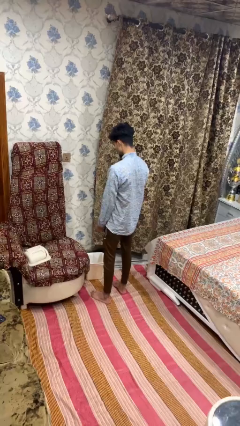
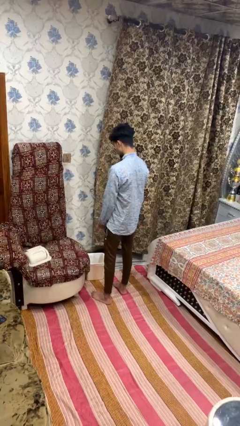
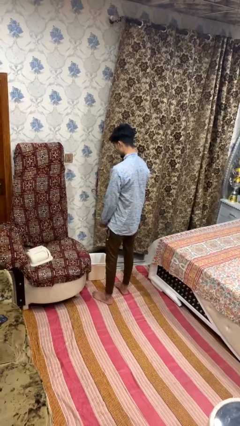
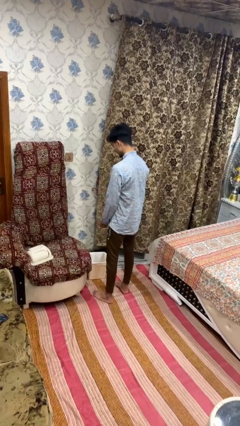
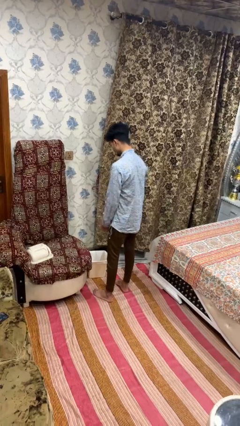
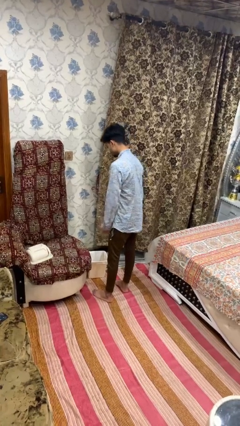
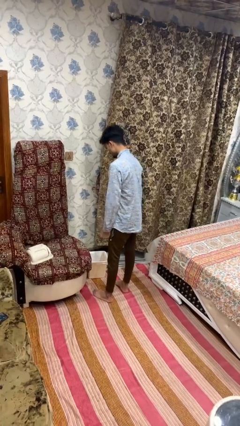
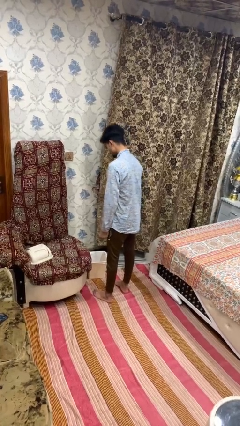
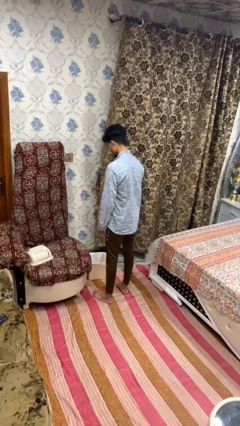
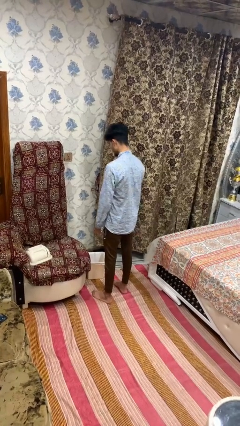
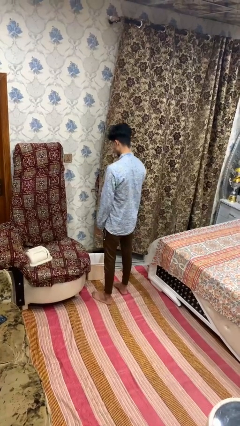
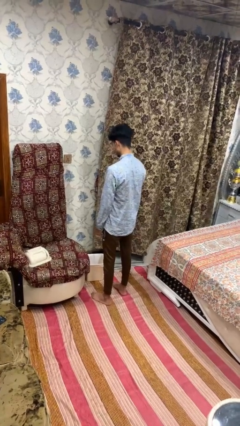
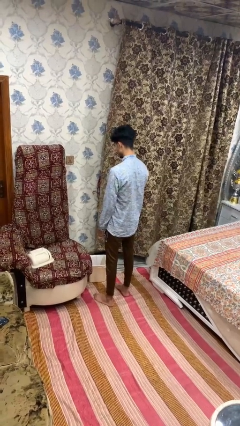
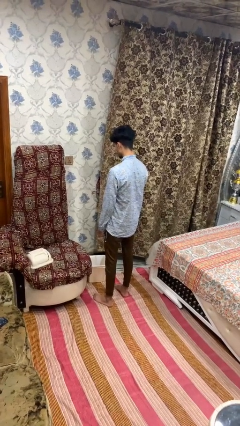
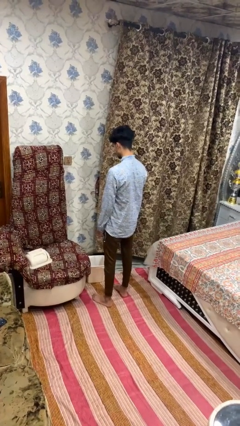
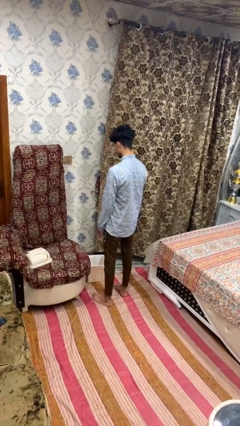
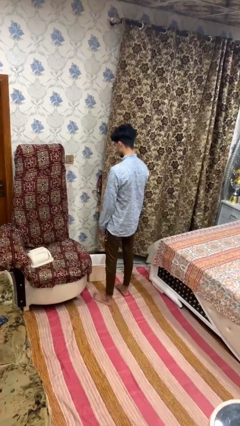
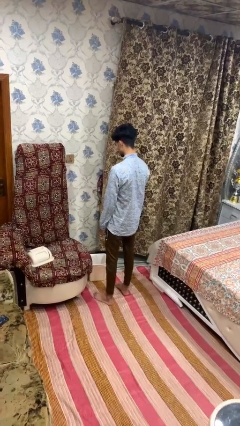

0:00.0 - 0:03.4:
person discards trash

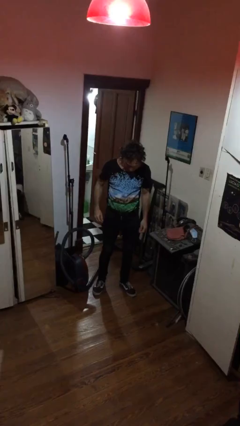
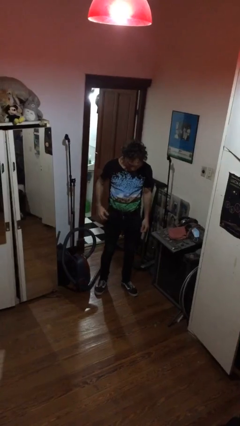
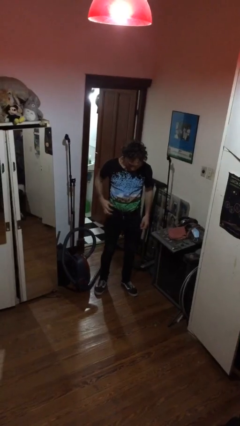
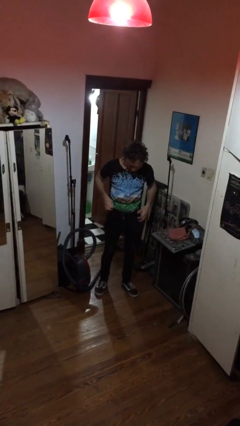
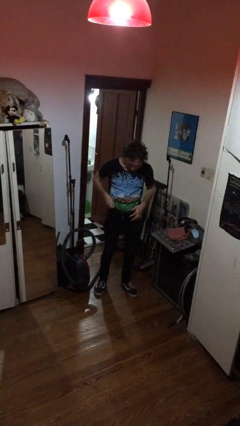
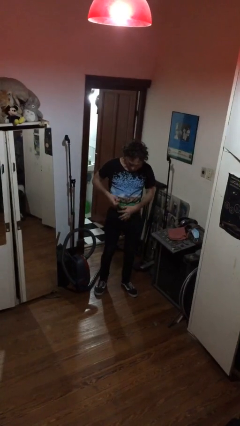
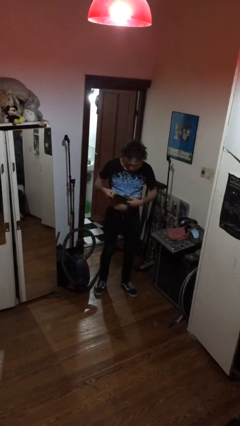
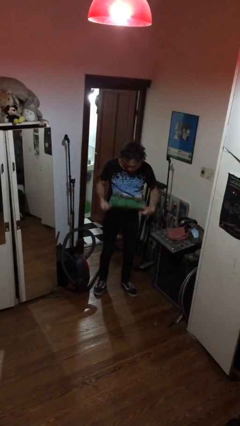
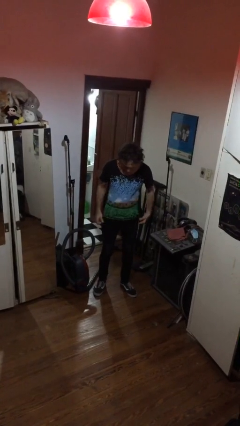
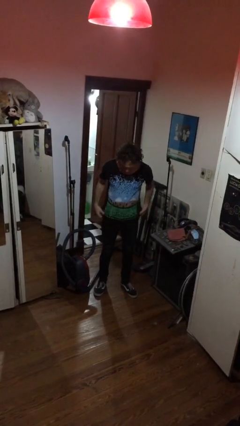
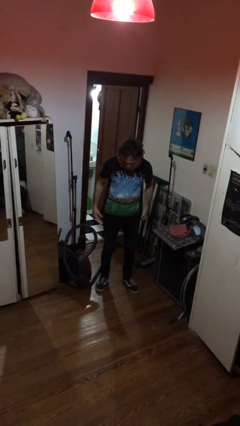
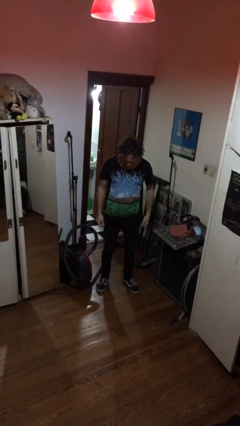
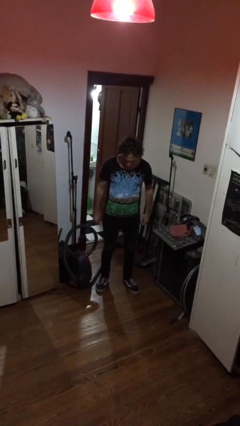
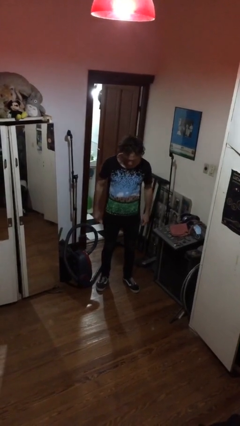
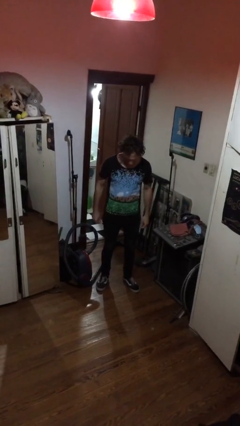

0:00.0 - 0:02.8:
person untucks shirt

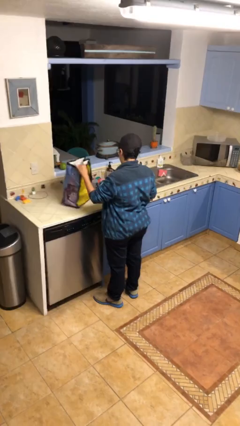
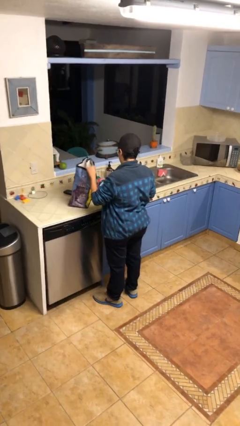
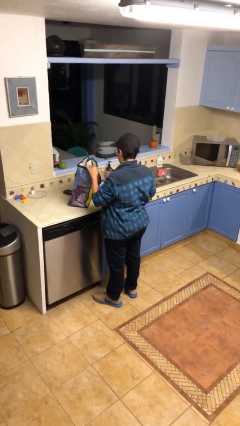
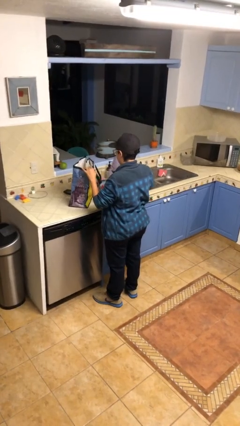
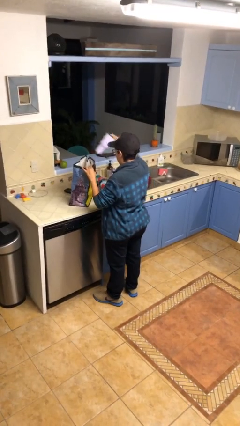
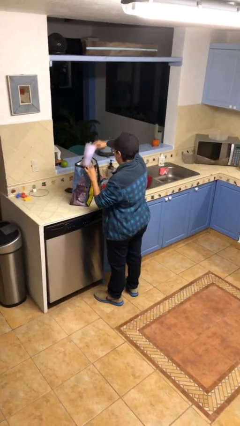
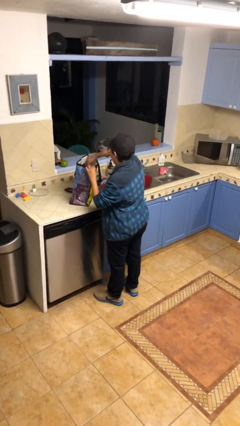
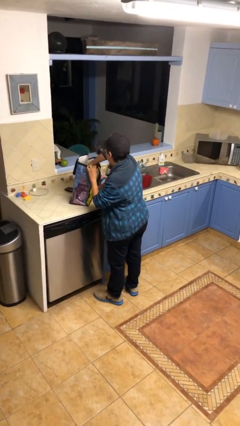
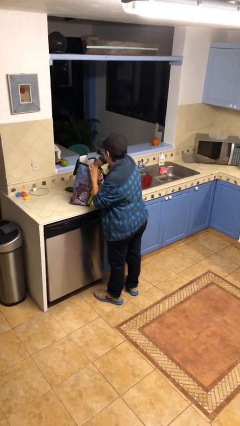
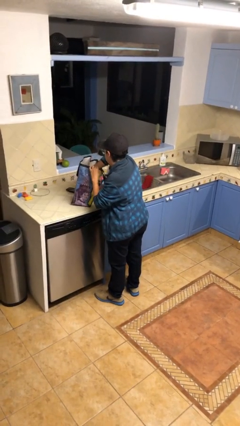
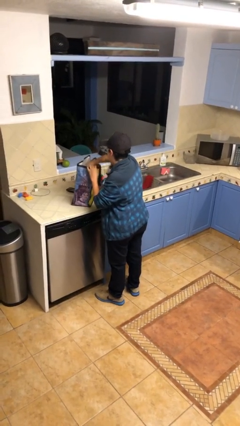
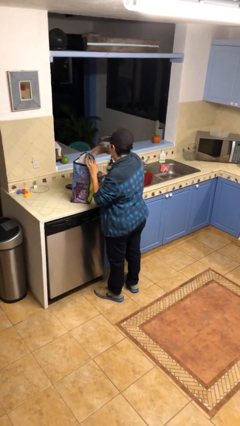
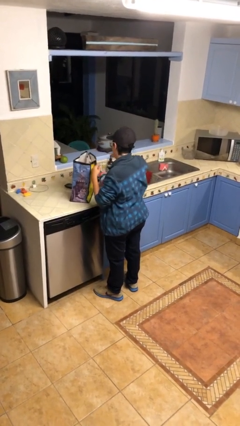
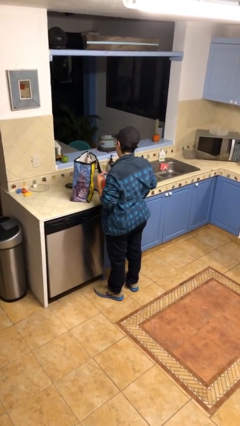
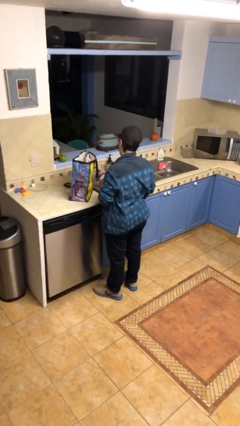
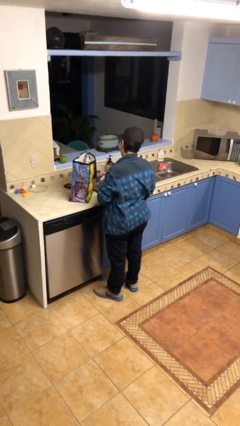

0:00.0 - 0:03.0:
person puts object into bag

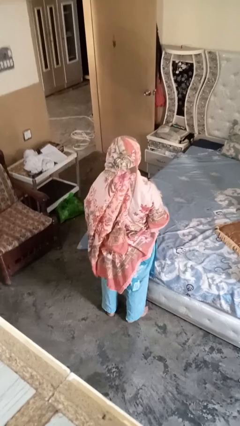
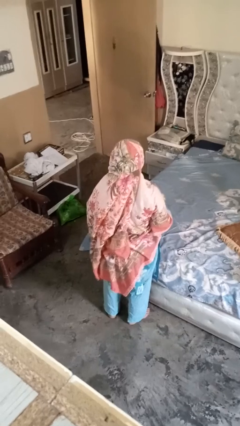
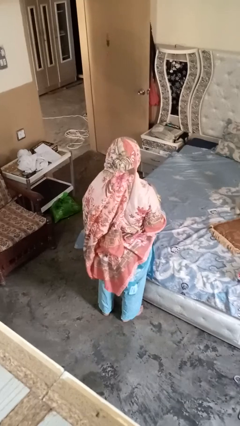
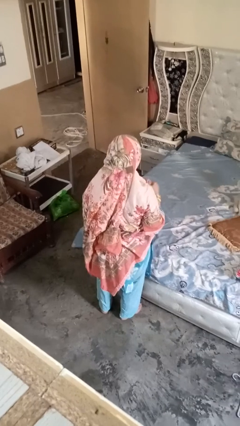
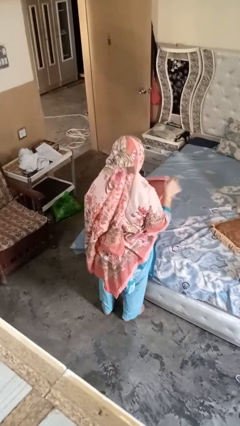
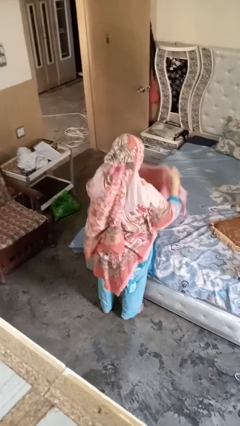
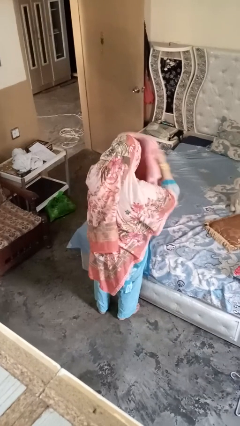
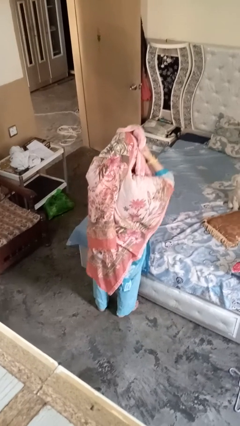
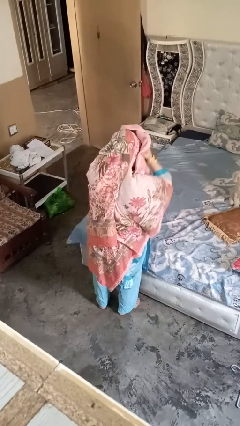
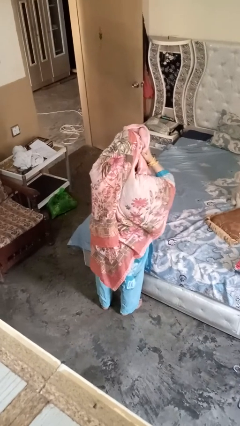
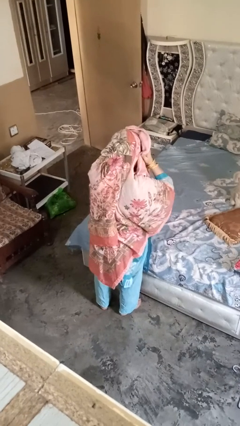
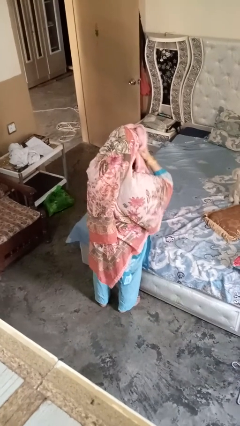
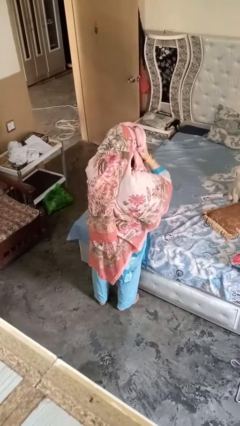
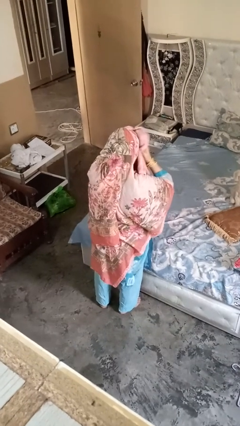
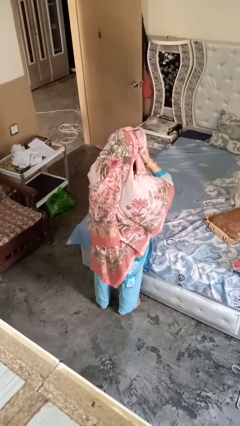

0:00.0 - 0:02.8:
person dries hair with hairdryer

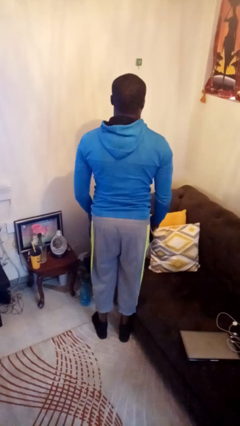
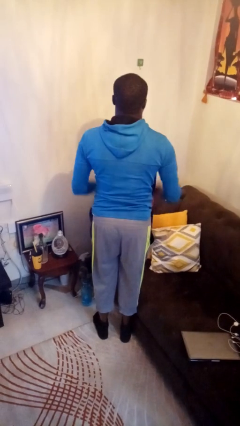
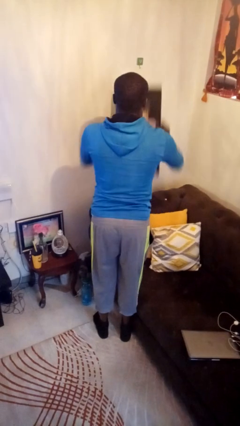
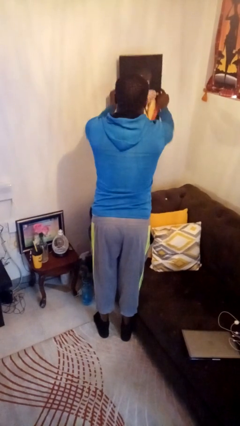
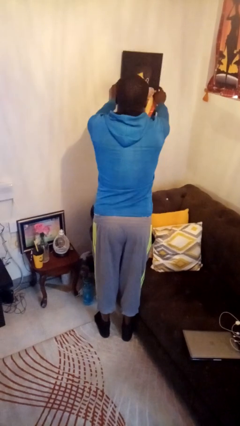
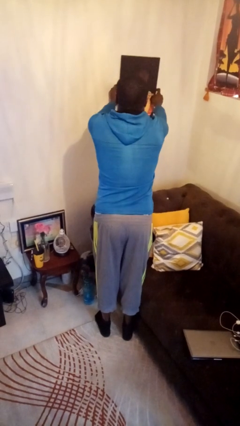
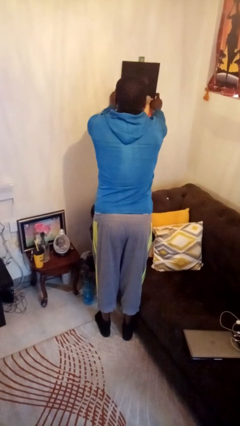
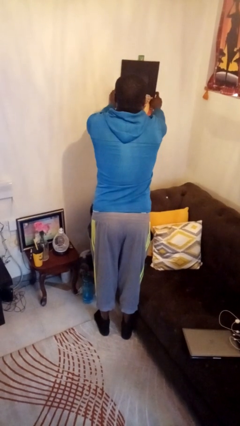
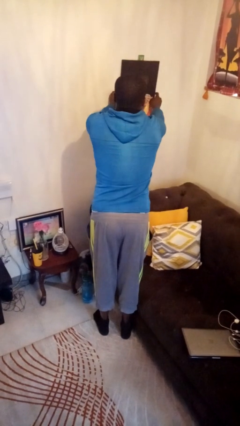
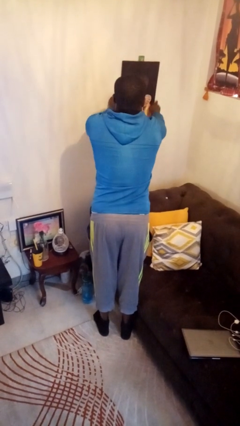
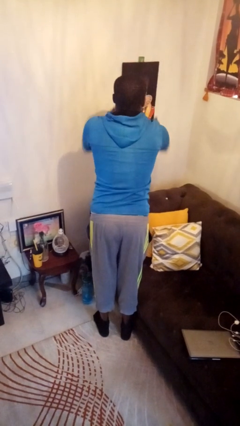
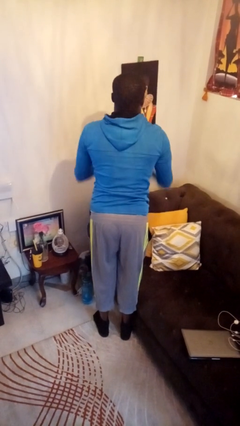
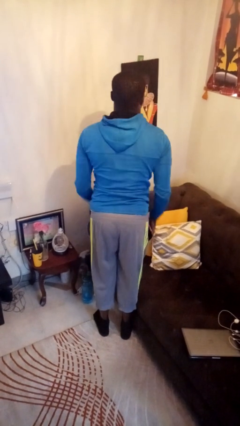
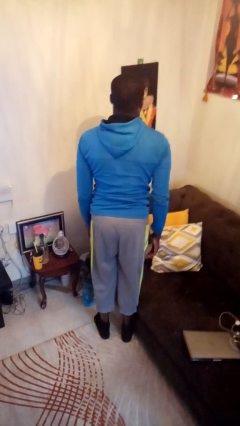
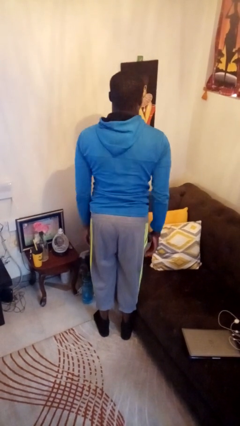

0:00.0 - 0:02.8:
person puts up picture frame

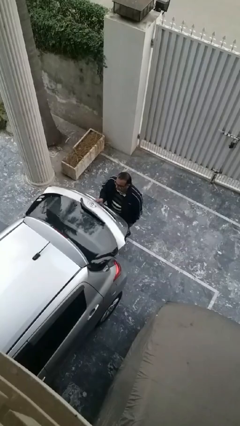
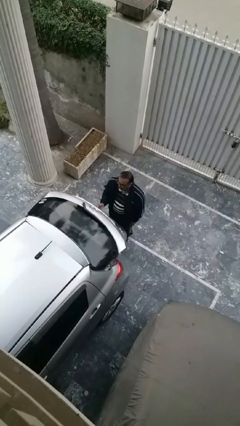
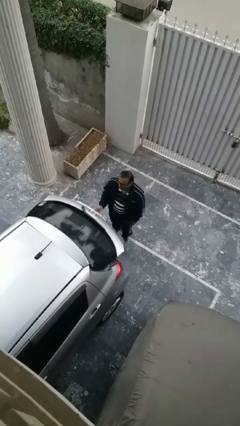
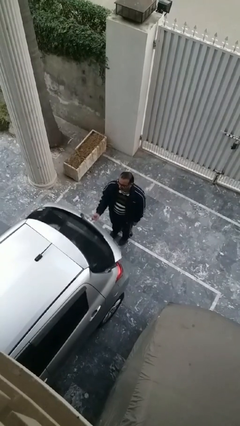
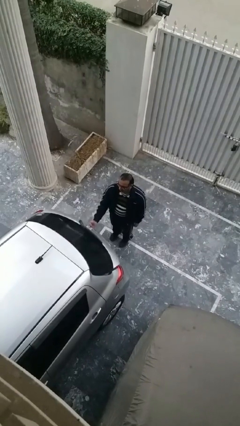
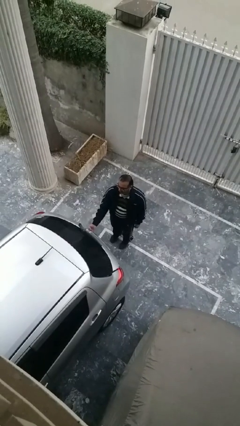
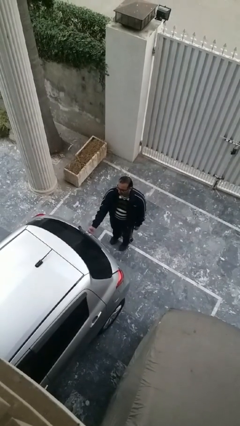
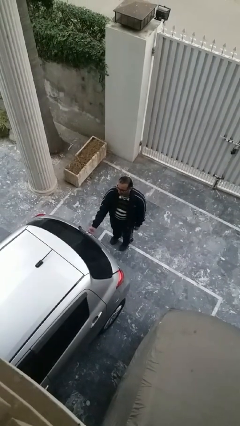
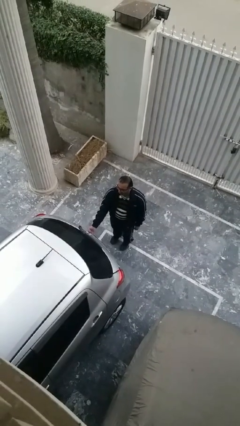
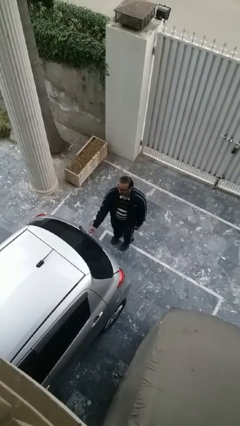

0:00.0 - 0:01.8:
person closes car trunk

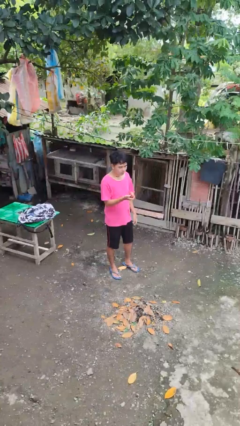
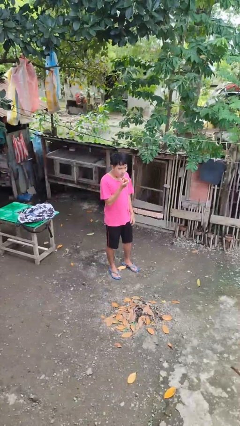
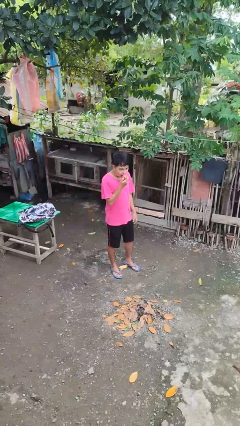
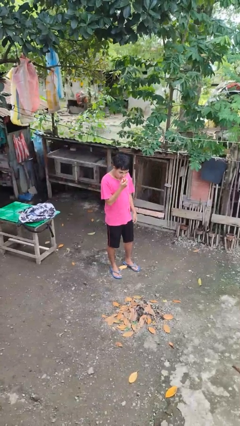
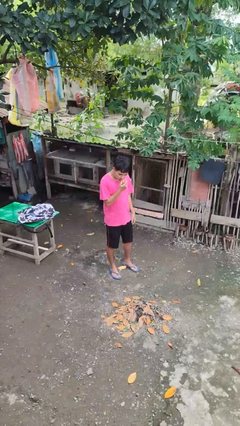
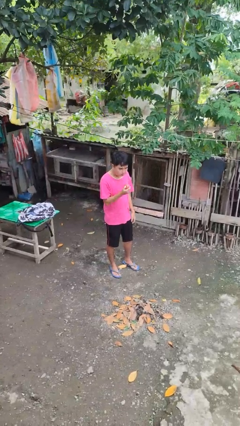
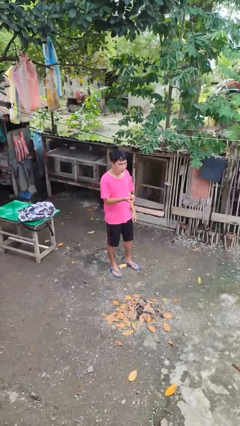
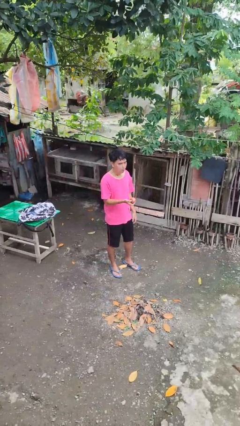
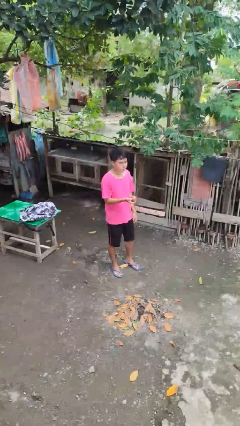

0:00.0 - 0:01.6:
person eats apple
